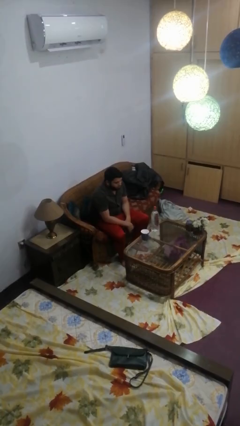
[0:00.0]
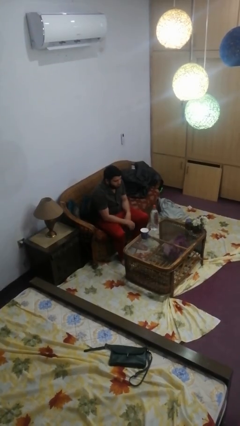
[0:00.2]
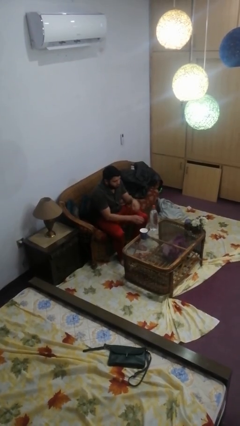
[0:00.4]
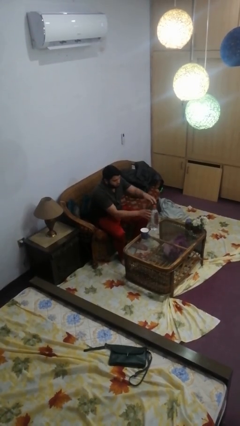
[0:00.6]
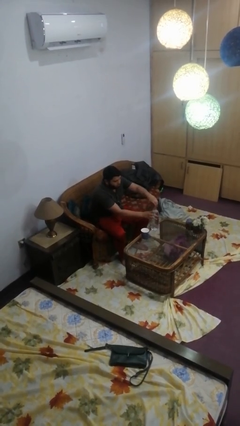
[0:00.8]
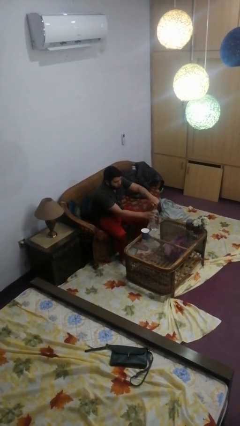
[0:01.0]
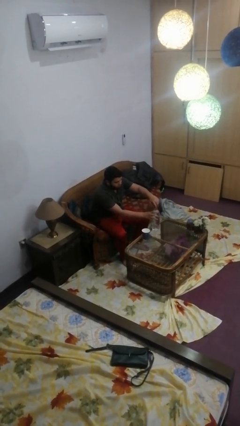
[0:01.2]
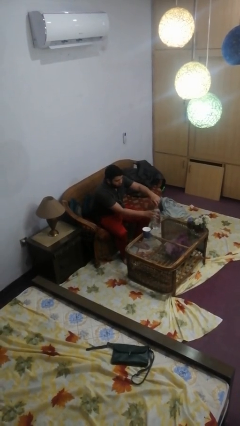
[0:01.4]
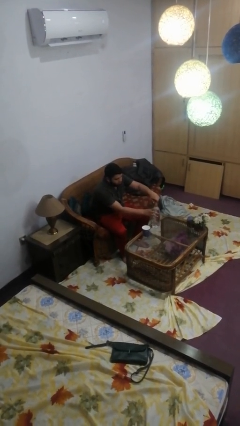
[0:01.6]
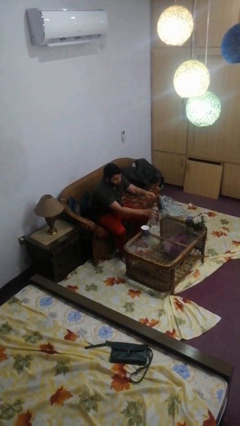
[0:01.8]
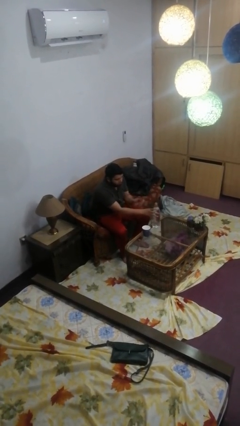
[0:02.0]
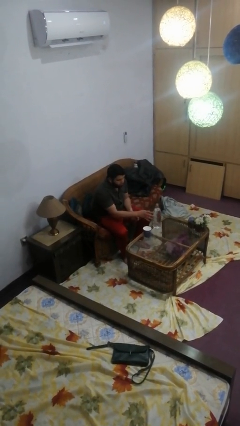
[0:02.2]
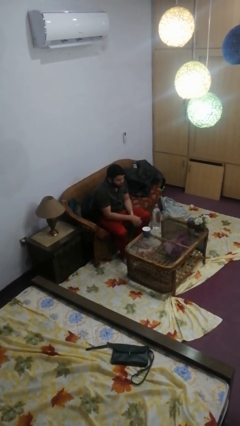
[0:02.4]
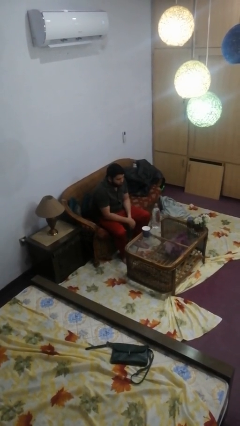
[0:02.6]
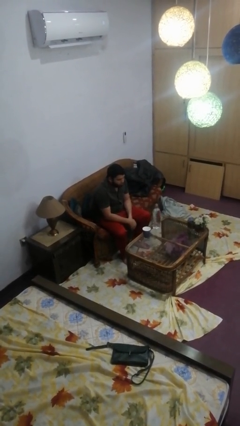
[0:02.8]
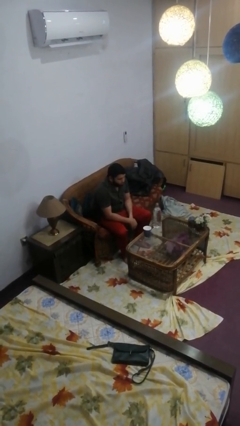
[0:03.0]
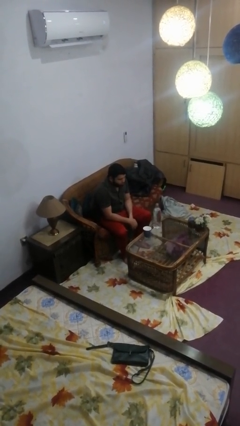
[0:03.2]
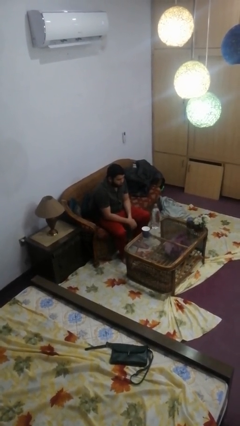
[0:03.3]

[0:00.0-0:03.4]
person unscrews lid from bottle

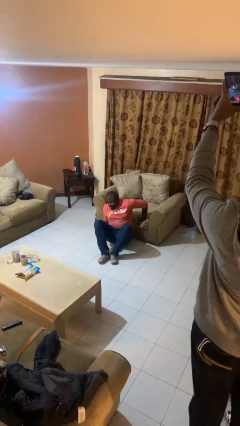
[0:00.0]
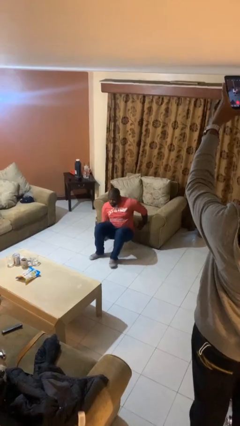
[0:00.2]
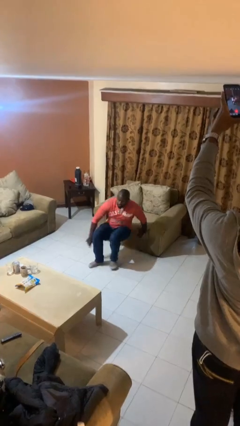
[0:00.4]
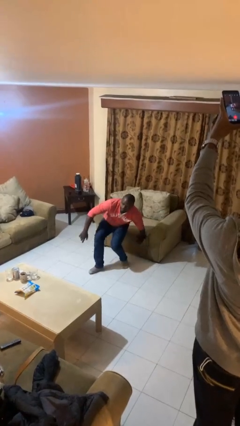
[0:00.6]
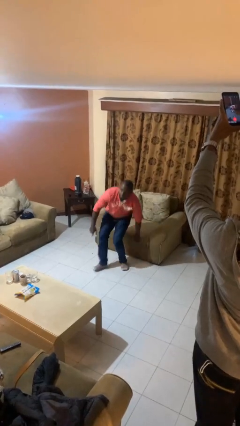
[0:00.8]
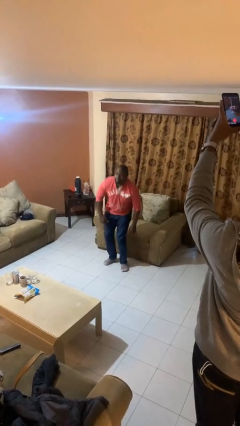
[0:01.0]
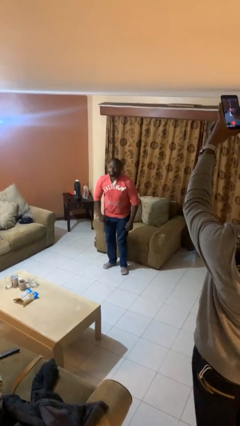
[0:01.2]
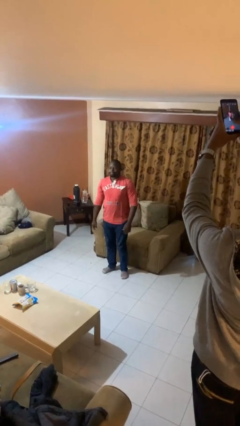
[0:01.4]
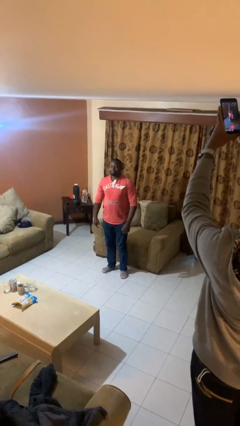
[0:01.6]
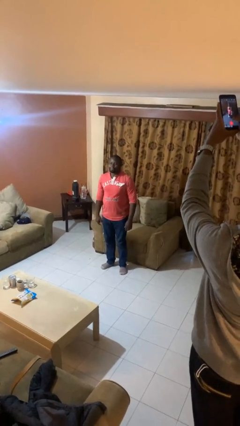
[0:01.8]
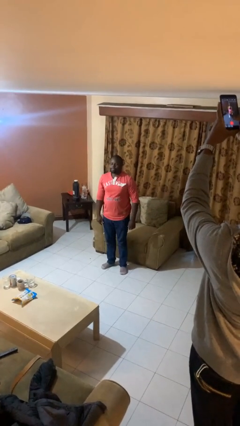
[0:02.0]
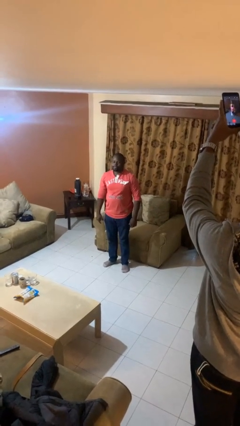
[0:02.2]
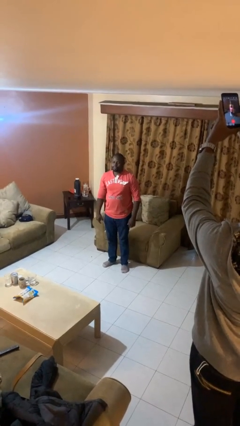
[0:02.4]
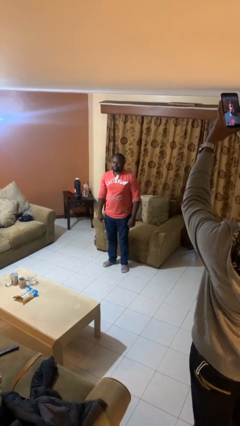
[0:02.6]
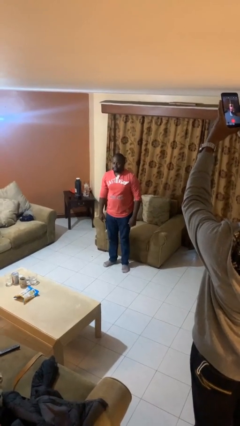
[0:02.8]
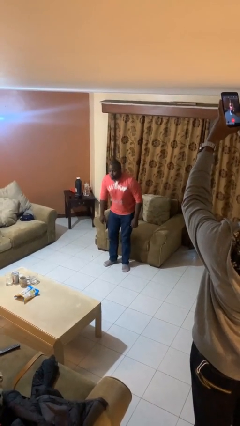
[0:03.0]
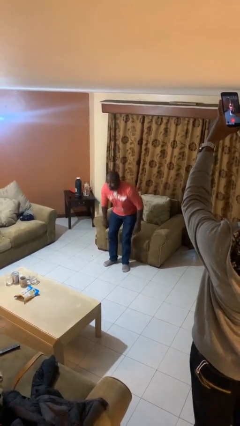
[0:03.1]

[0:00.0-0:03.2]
person stands up from floor

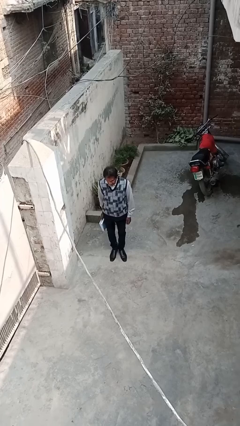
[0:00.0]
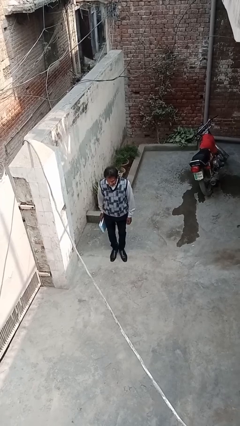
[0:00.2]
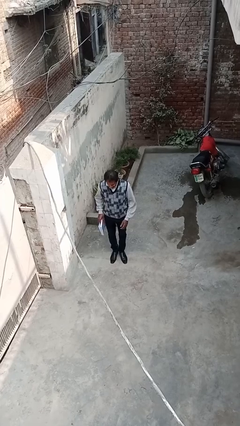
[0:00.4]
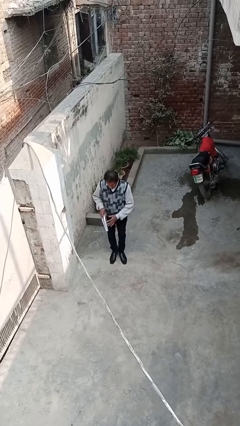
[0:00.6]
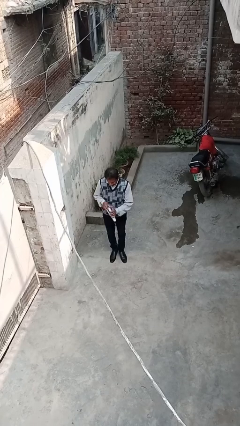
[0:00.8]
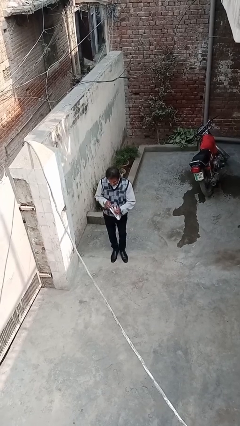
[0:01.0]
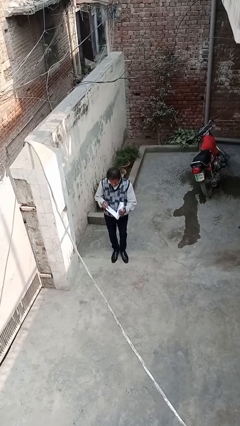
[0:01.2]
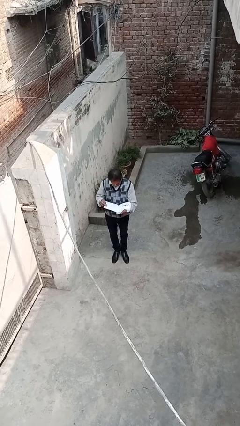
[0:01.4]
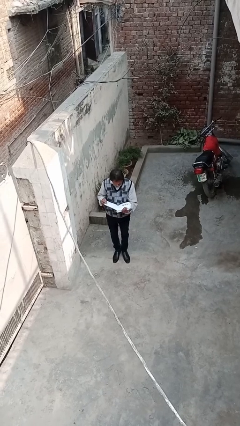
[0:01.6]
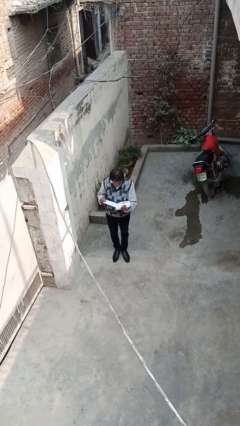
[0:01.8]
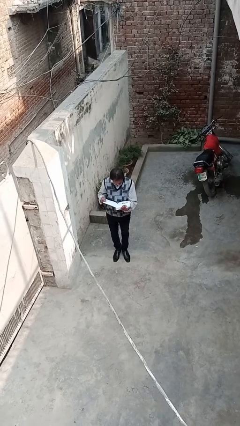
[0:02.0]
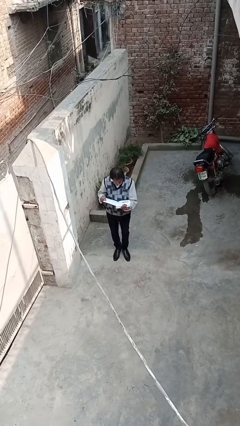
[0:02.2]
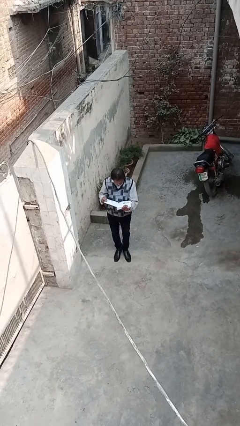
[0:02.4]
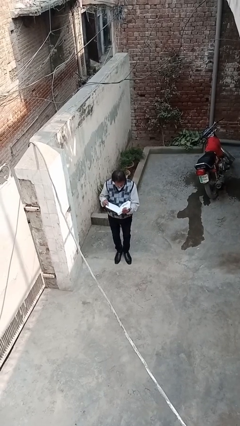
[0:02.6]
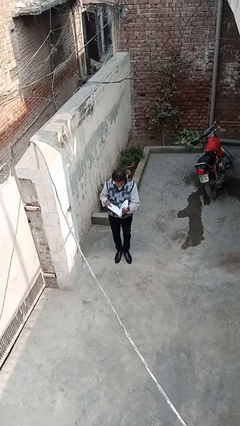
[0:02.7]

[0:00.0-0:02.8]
person reads document

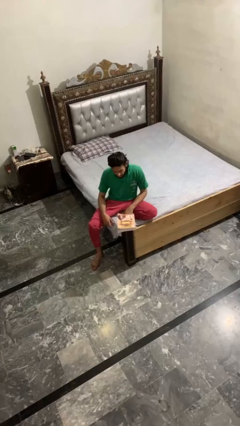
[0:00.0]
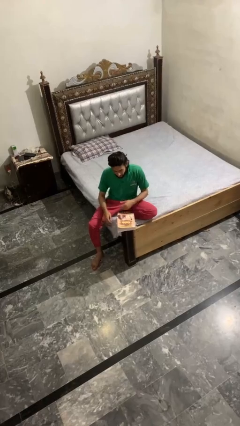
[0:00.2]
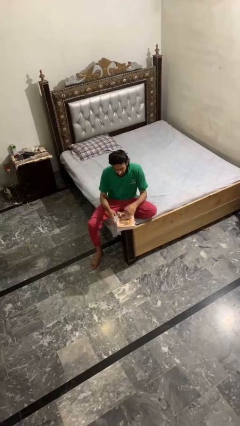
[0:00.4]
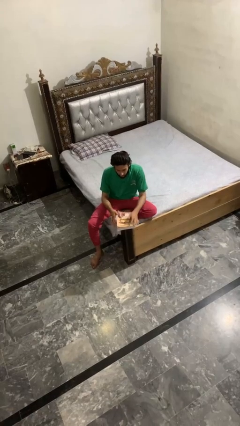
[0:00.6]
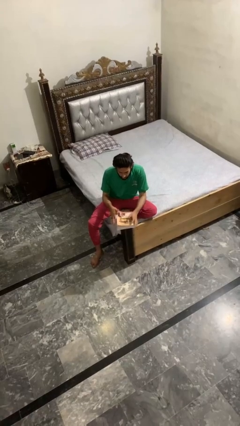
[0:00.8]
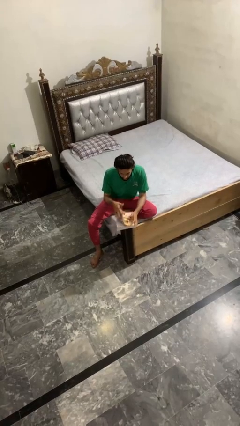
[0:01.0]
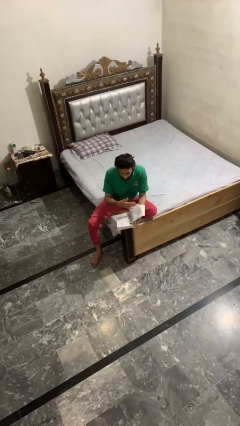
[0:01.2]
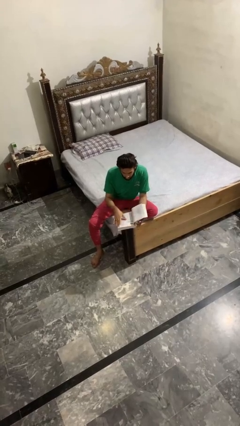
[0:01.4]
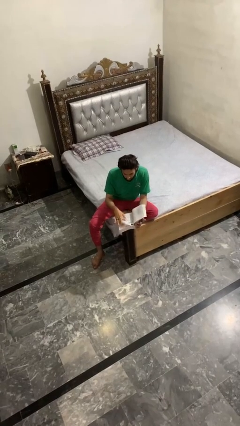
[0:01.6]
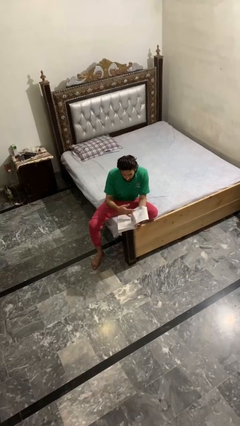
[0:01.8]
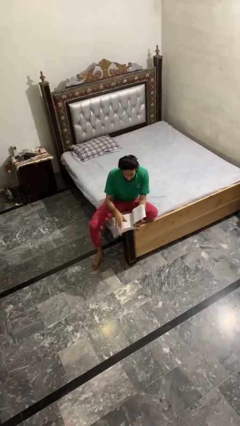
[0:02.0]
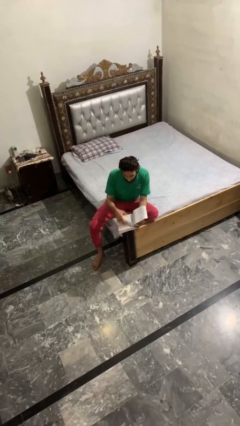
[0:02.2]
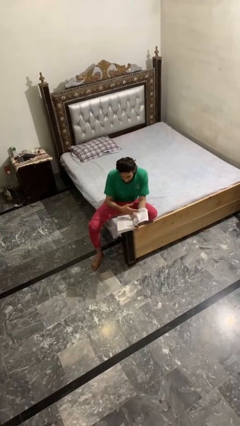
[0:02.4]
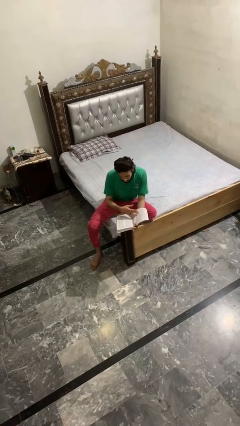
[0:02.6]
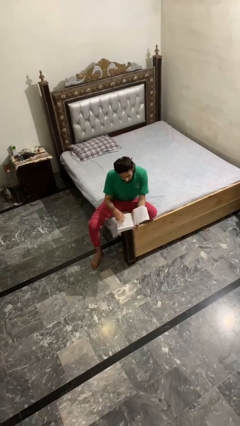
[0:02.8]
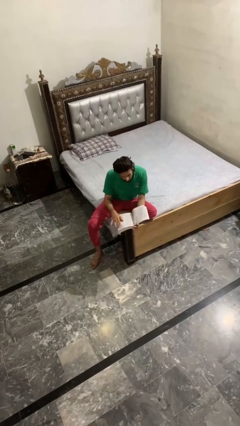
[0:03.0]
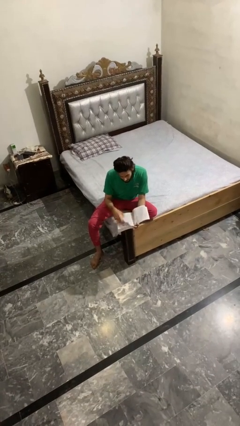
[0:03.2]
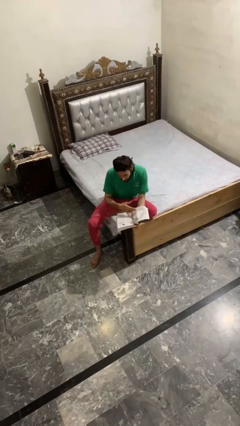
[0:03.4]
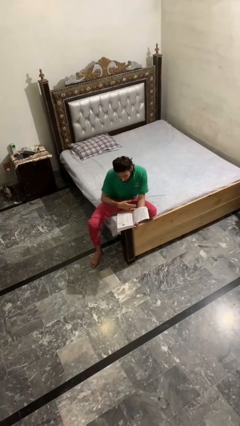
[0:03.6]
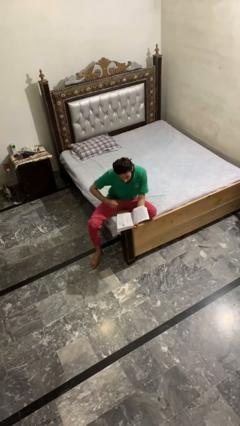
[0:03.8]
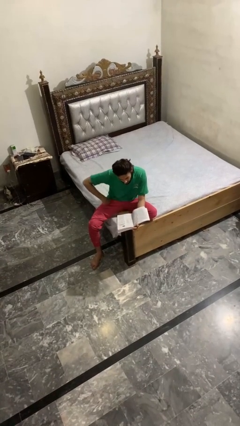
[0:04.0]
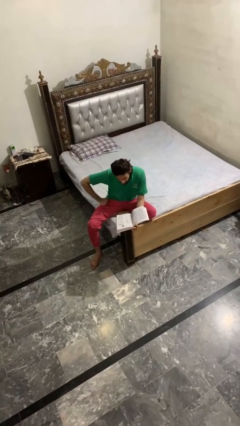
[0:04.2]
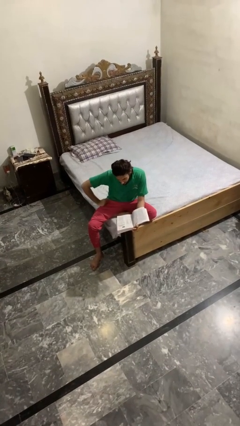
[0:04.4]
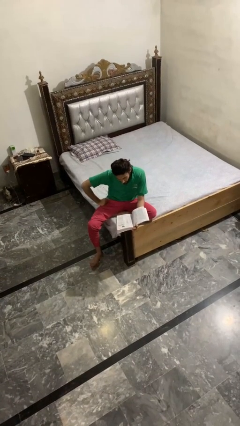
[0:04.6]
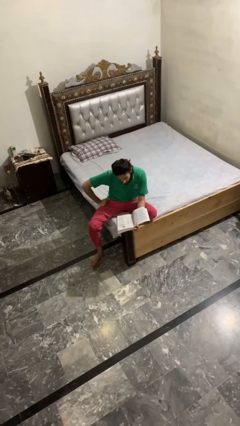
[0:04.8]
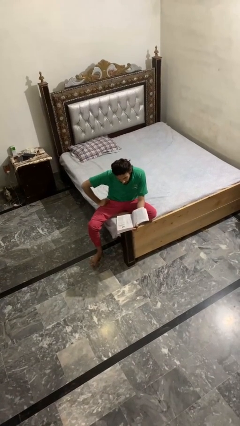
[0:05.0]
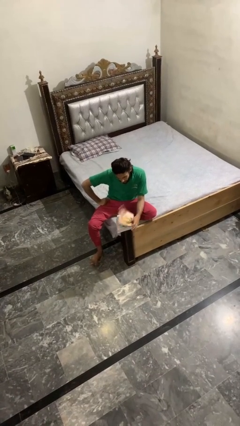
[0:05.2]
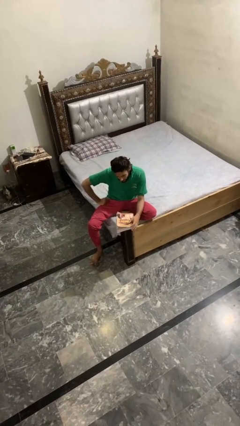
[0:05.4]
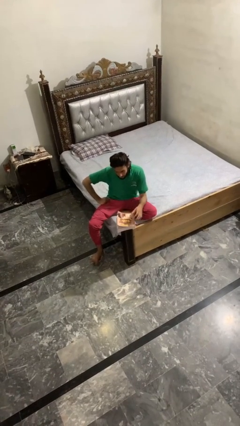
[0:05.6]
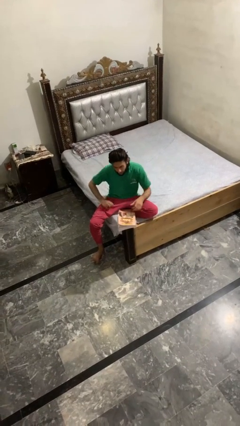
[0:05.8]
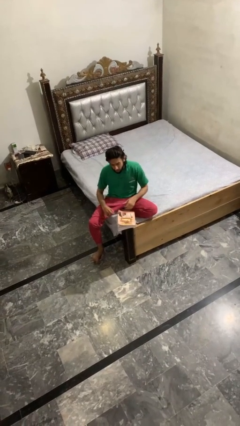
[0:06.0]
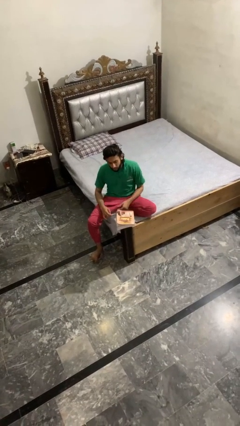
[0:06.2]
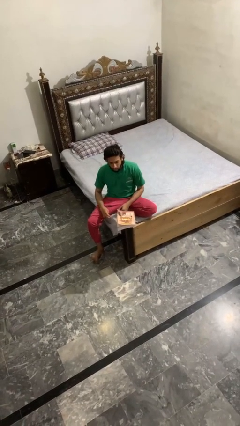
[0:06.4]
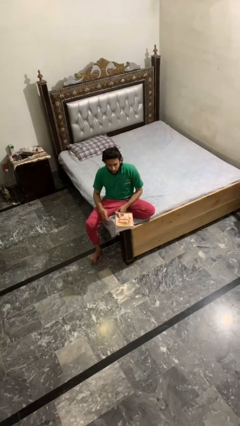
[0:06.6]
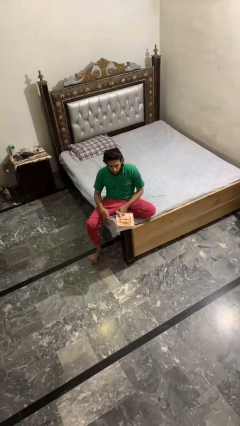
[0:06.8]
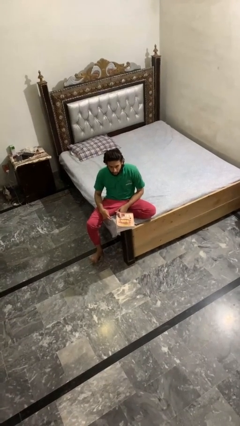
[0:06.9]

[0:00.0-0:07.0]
person reads book

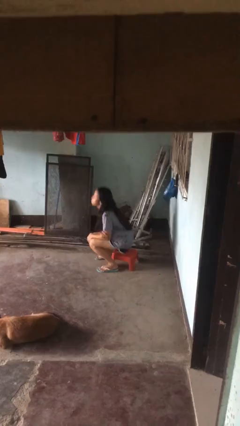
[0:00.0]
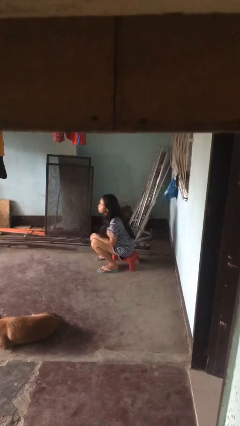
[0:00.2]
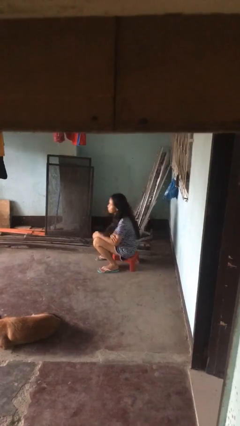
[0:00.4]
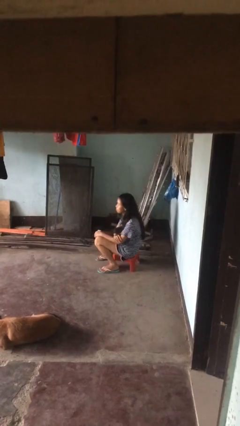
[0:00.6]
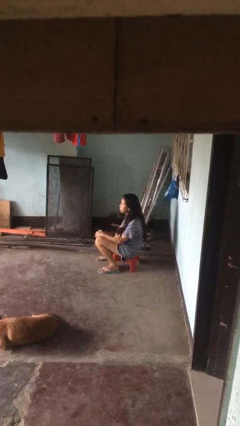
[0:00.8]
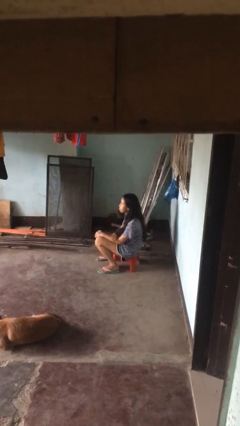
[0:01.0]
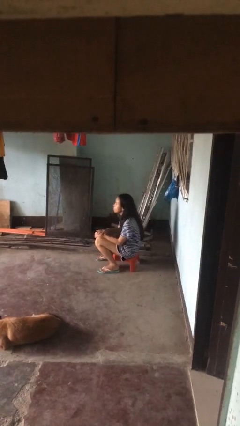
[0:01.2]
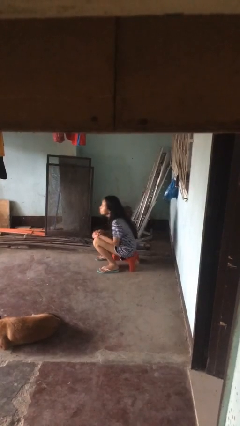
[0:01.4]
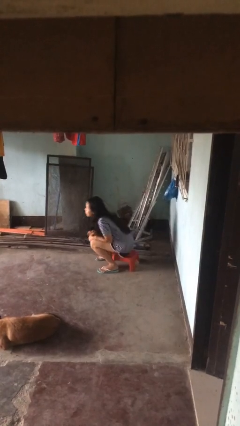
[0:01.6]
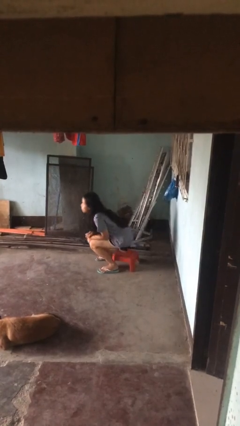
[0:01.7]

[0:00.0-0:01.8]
person sits down
